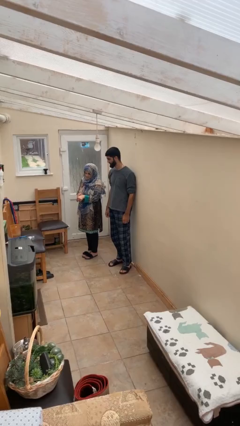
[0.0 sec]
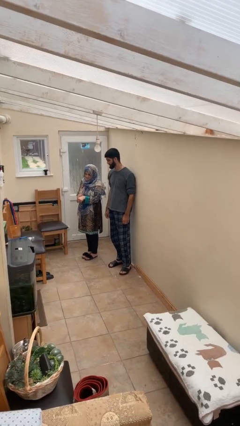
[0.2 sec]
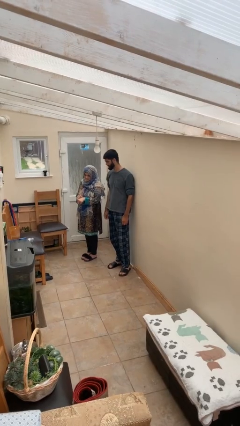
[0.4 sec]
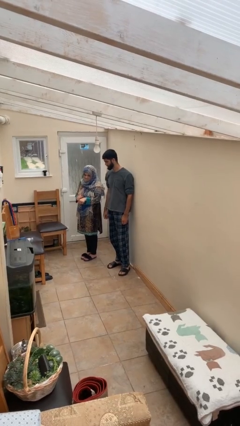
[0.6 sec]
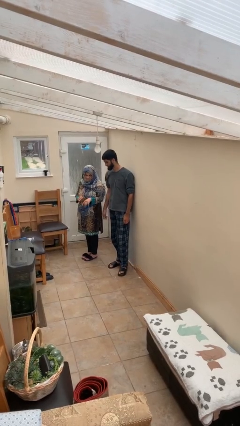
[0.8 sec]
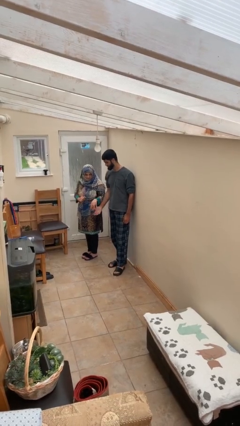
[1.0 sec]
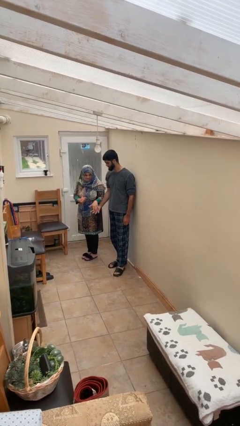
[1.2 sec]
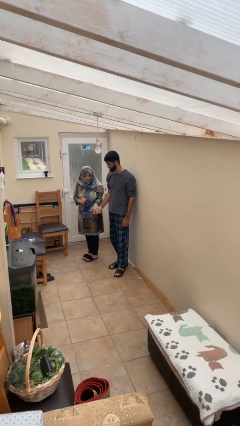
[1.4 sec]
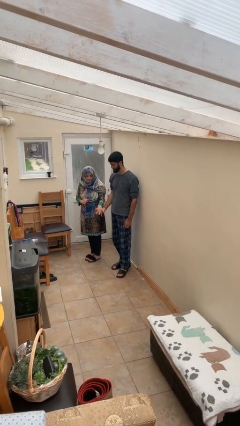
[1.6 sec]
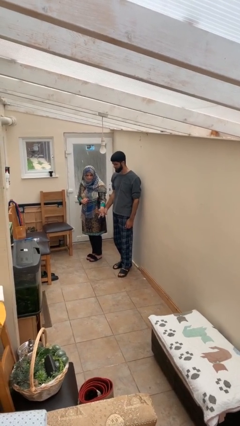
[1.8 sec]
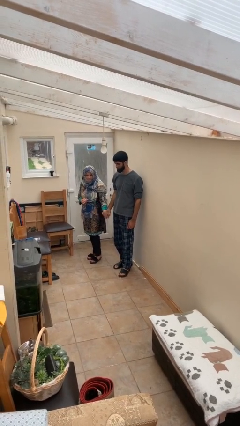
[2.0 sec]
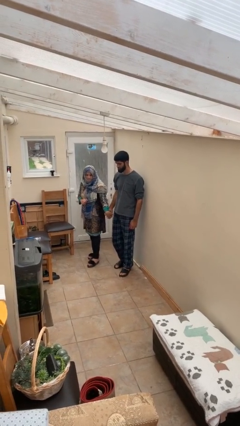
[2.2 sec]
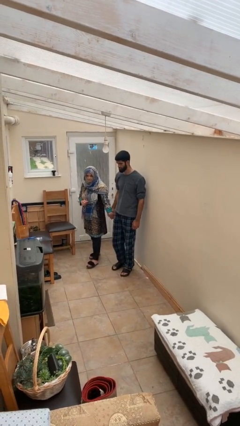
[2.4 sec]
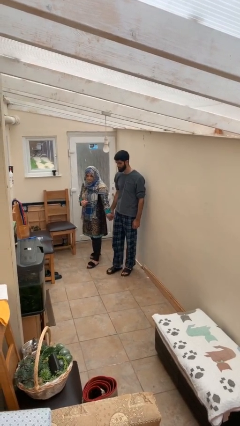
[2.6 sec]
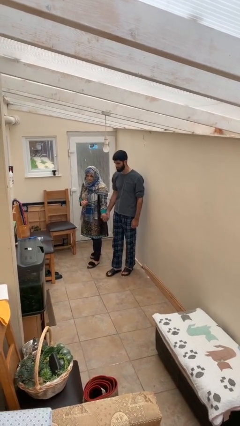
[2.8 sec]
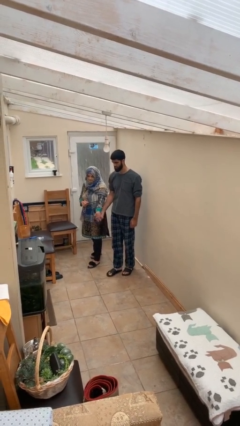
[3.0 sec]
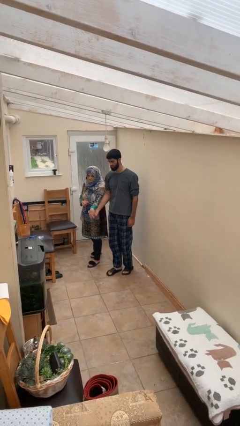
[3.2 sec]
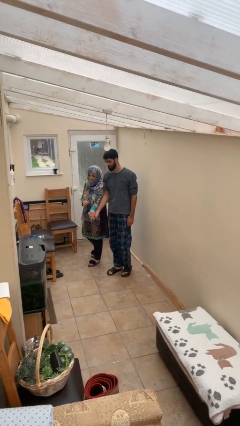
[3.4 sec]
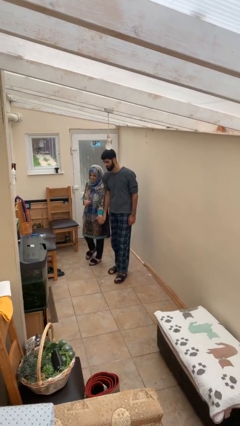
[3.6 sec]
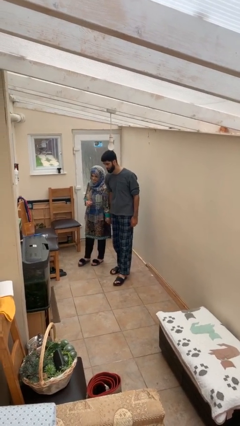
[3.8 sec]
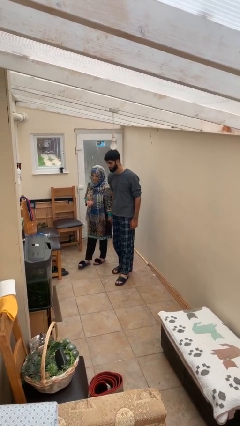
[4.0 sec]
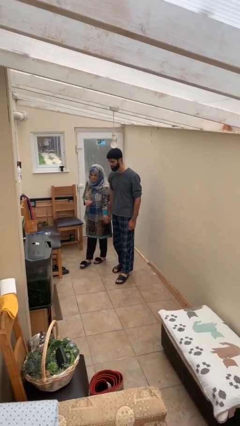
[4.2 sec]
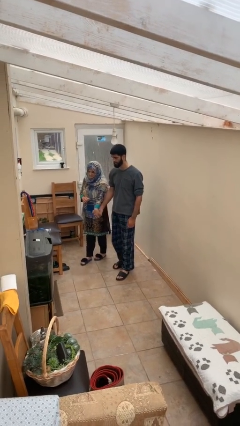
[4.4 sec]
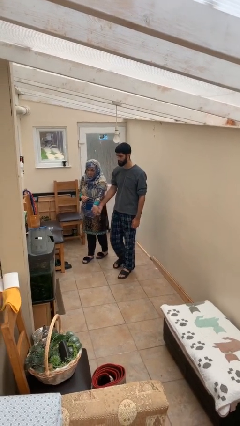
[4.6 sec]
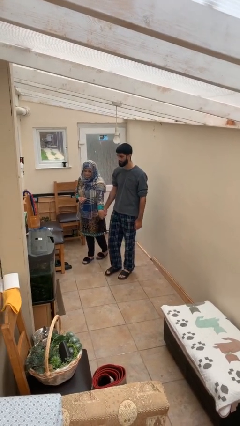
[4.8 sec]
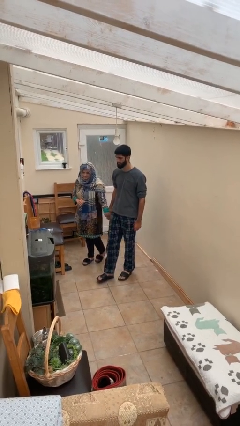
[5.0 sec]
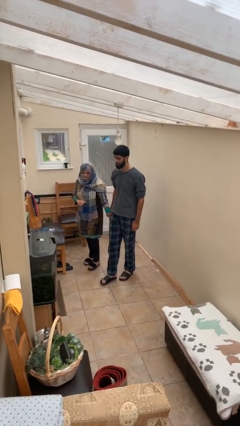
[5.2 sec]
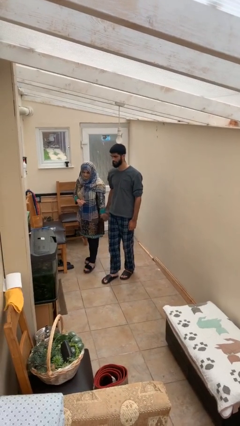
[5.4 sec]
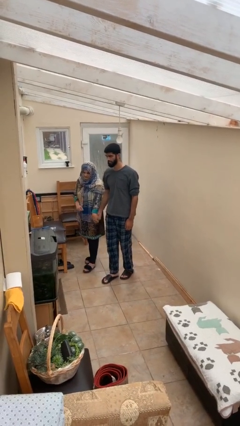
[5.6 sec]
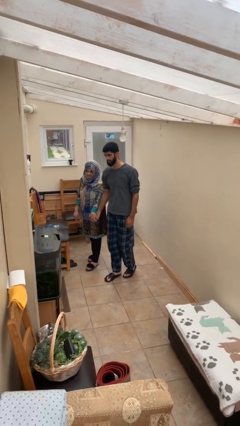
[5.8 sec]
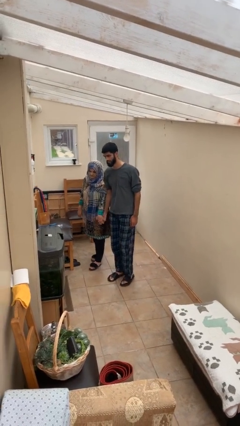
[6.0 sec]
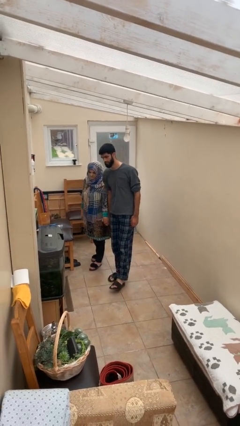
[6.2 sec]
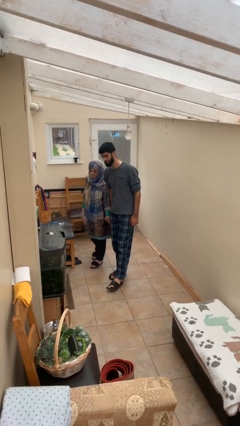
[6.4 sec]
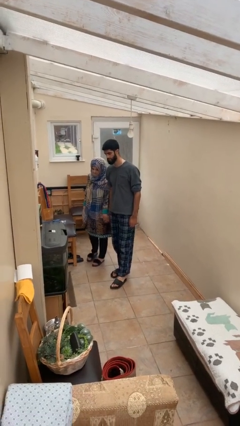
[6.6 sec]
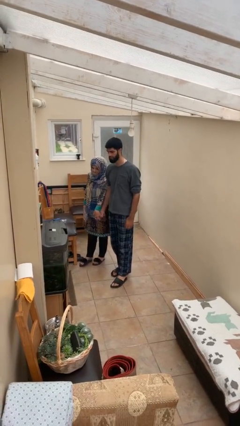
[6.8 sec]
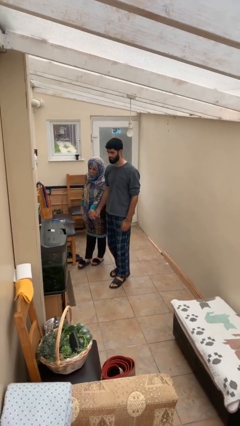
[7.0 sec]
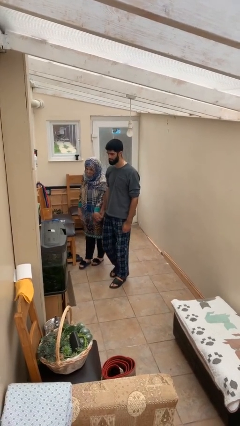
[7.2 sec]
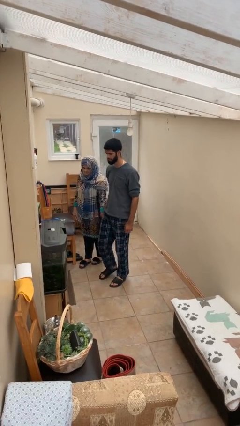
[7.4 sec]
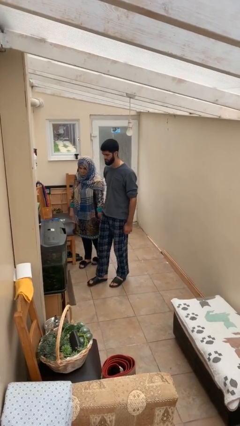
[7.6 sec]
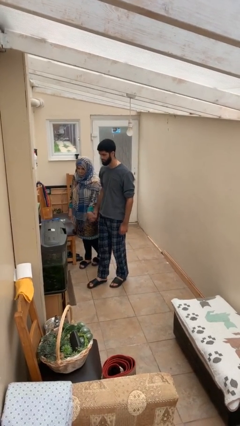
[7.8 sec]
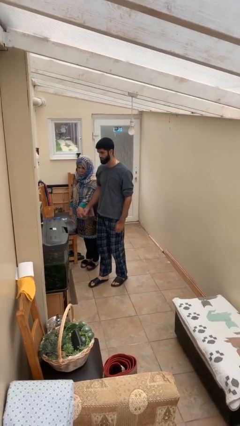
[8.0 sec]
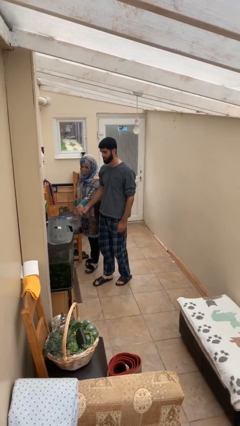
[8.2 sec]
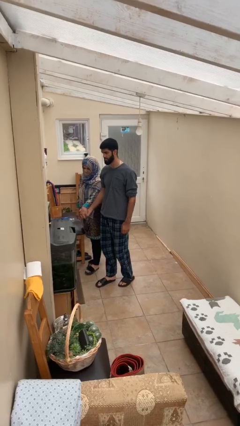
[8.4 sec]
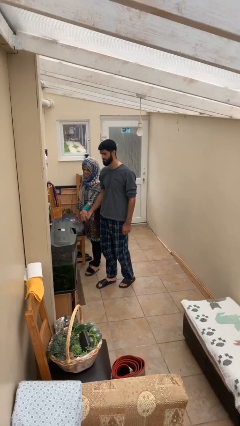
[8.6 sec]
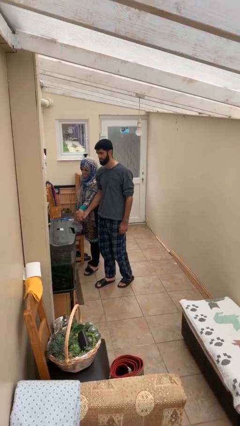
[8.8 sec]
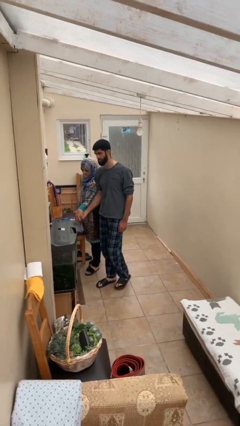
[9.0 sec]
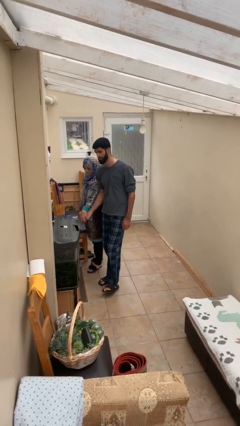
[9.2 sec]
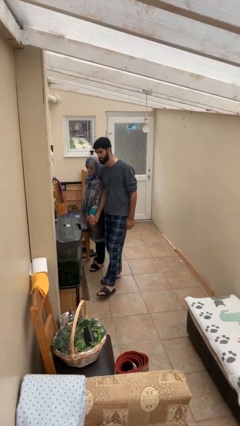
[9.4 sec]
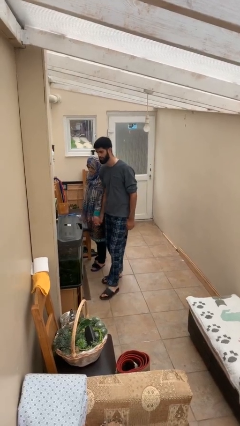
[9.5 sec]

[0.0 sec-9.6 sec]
person holds hand

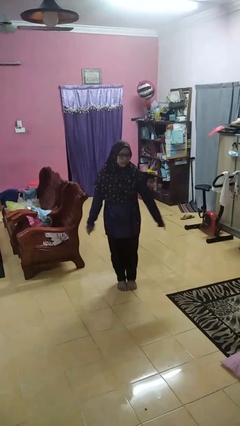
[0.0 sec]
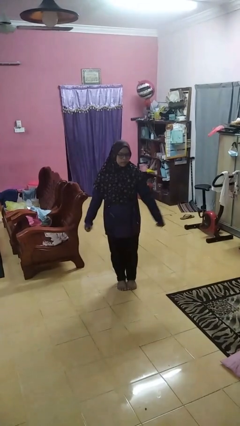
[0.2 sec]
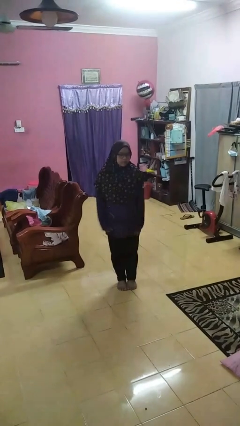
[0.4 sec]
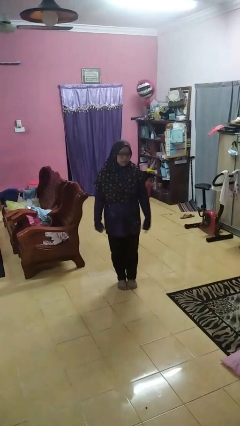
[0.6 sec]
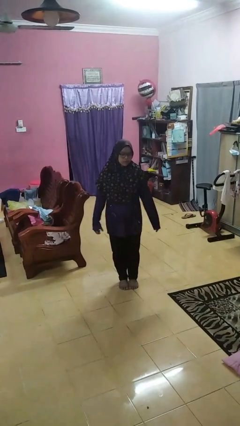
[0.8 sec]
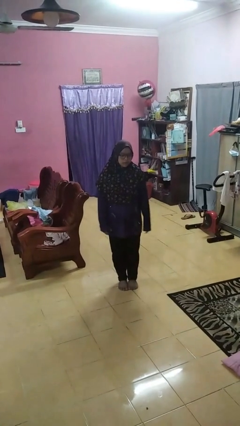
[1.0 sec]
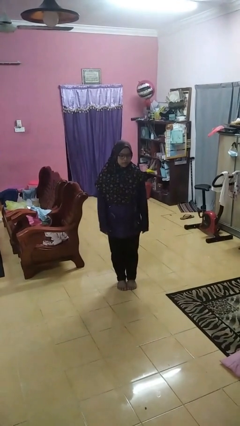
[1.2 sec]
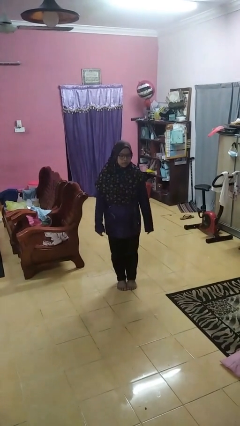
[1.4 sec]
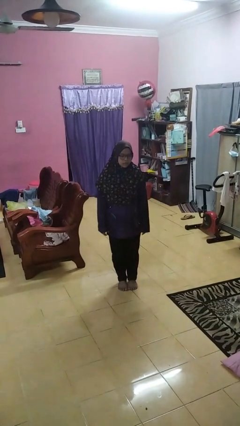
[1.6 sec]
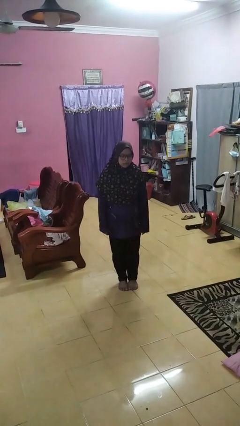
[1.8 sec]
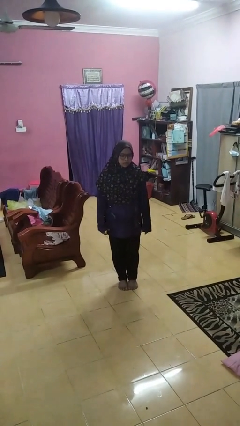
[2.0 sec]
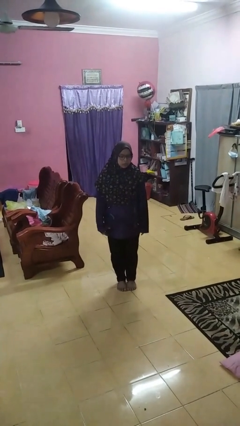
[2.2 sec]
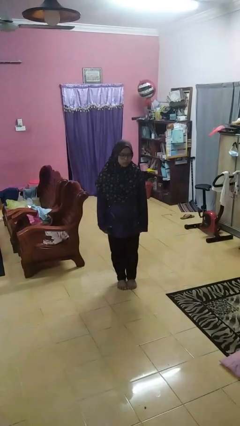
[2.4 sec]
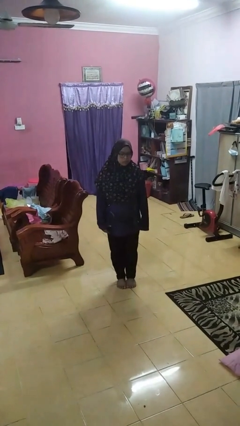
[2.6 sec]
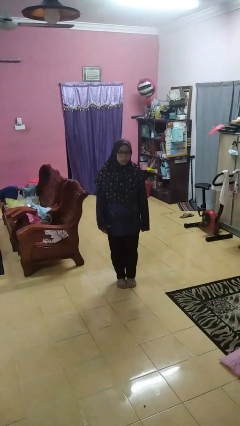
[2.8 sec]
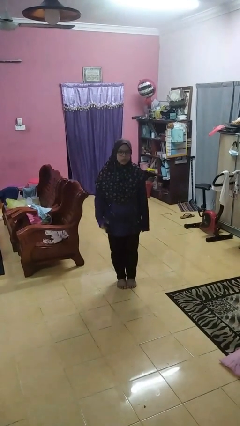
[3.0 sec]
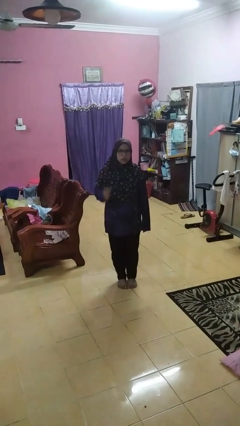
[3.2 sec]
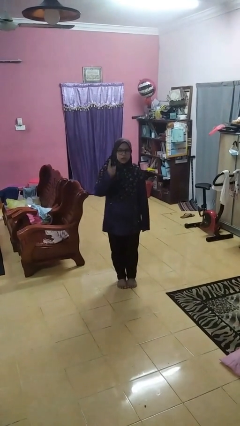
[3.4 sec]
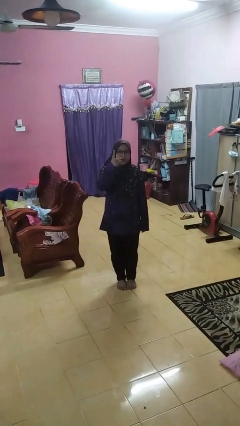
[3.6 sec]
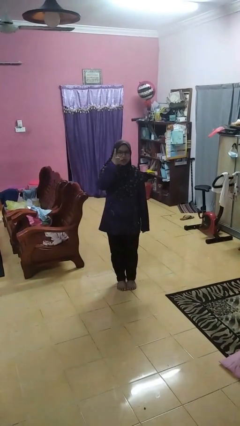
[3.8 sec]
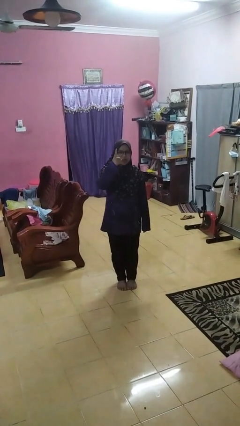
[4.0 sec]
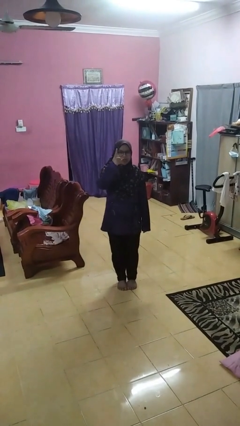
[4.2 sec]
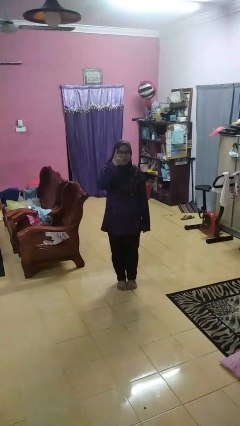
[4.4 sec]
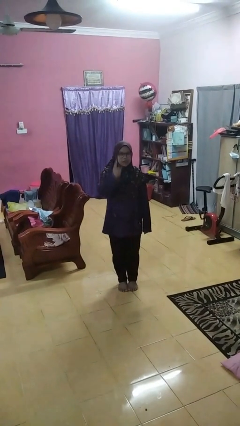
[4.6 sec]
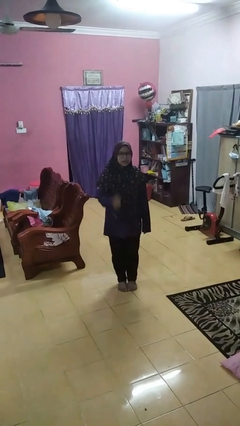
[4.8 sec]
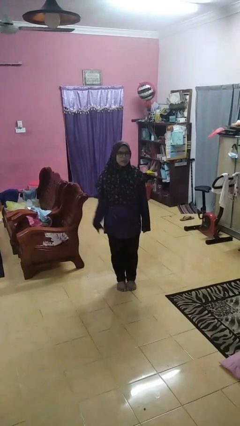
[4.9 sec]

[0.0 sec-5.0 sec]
person gestures number one

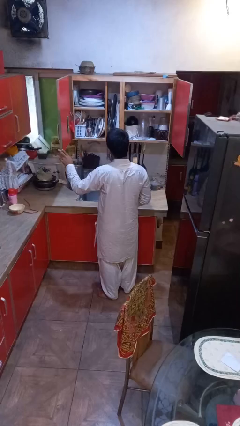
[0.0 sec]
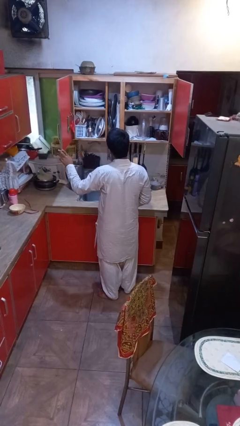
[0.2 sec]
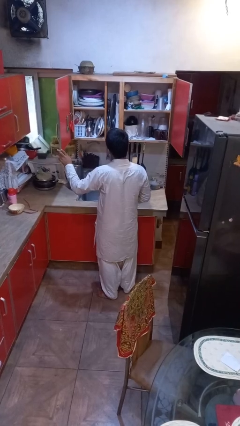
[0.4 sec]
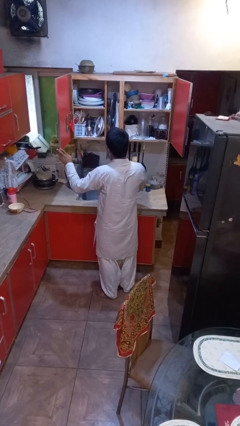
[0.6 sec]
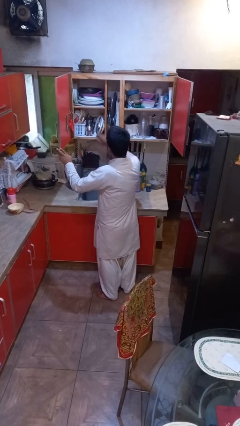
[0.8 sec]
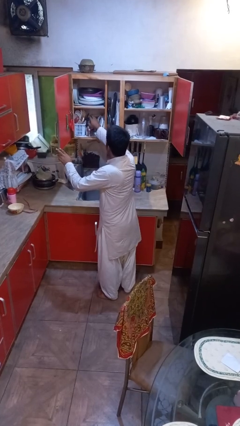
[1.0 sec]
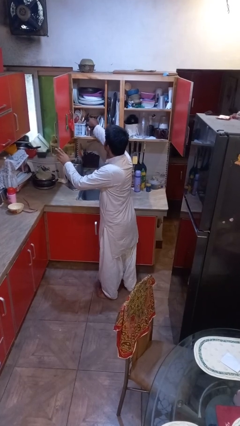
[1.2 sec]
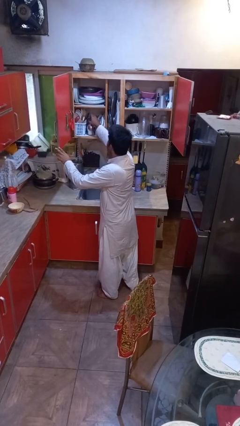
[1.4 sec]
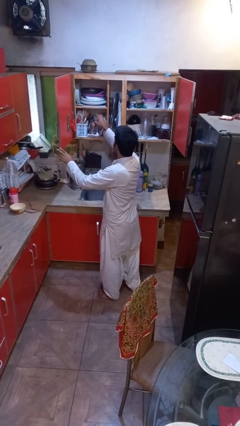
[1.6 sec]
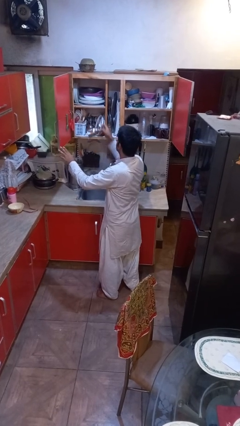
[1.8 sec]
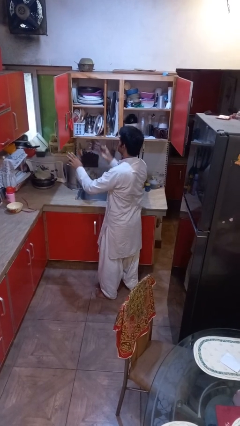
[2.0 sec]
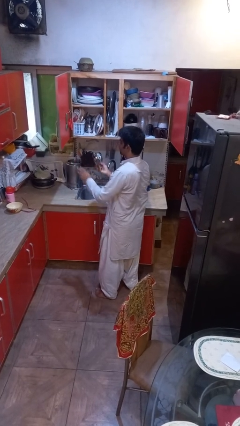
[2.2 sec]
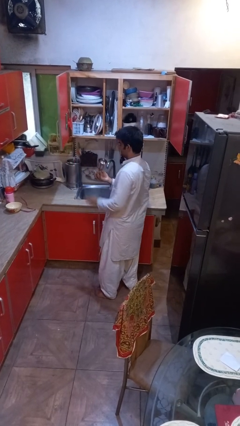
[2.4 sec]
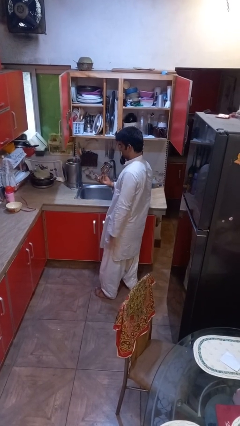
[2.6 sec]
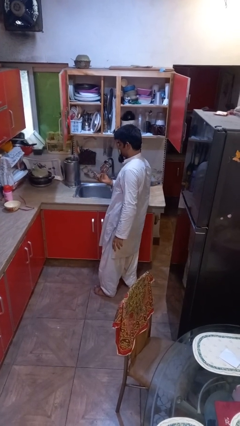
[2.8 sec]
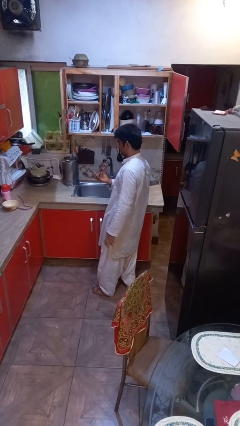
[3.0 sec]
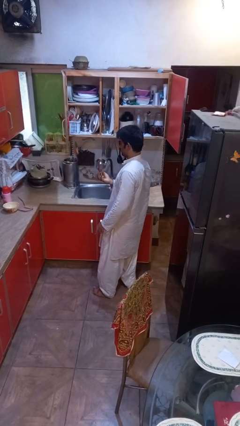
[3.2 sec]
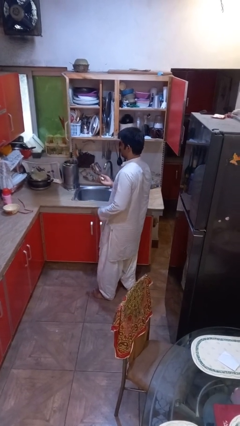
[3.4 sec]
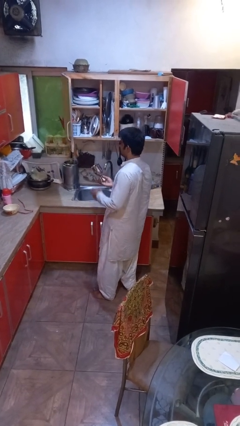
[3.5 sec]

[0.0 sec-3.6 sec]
person picks up object from cabinet
